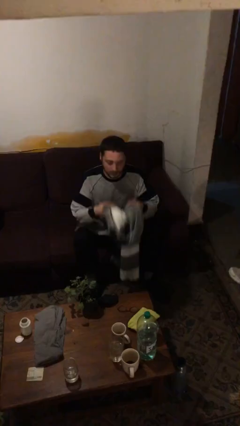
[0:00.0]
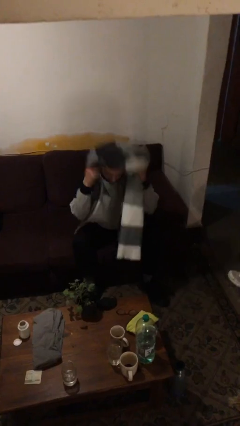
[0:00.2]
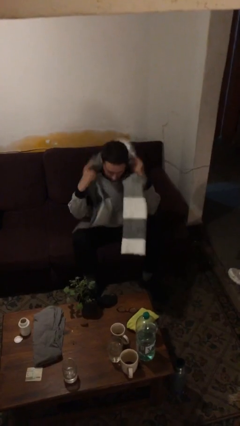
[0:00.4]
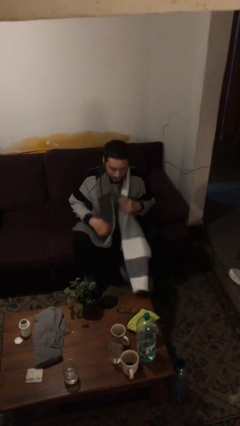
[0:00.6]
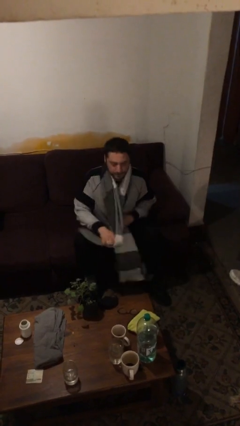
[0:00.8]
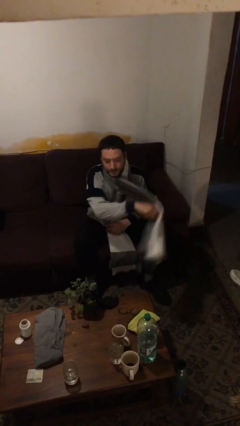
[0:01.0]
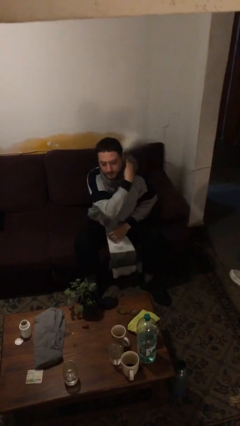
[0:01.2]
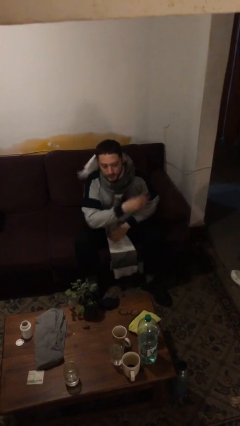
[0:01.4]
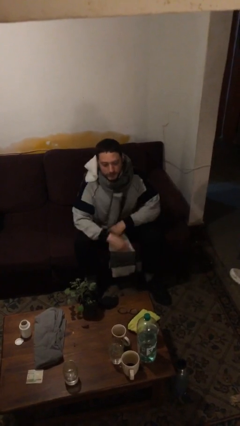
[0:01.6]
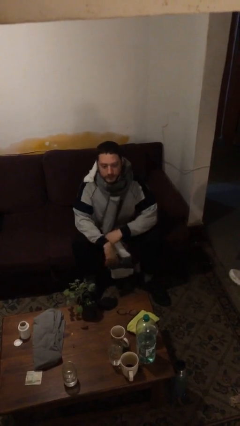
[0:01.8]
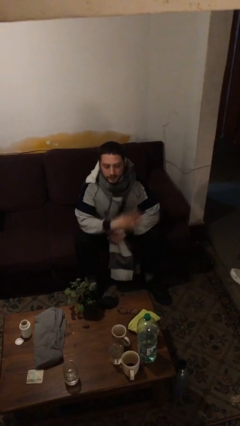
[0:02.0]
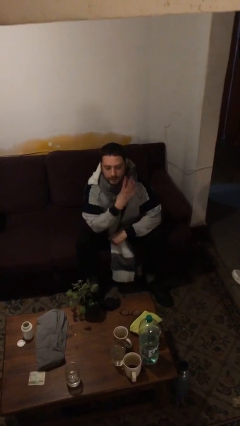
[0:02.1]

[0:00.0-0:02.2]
person puts on scarf

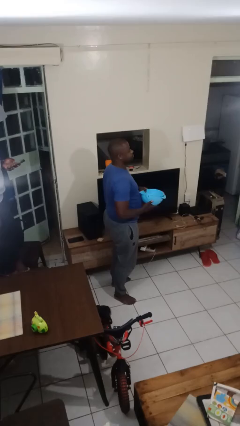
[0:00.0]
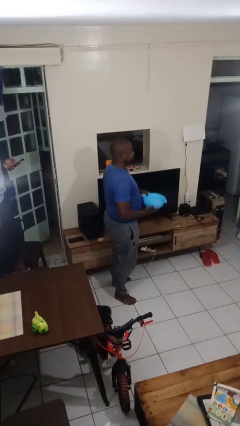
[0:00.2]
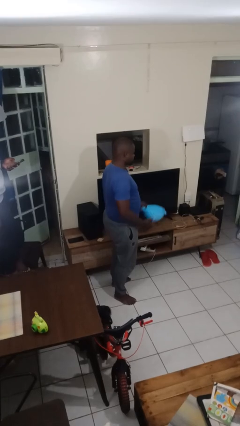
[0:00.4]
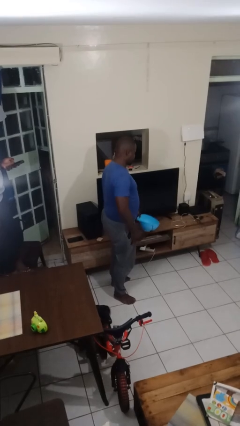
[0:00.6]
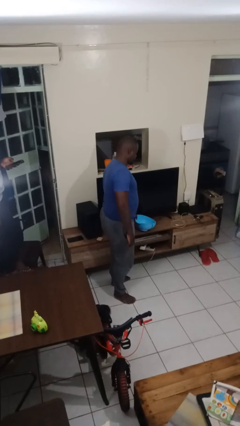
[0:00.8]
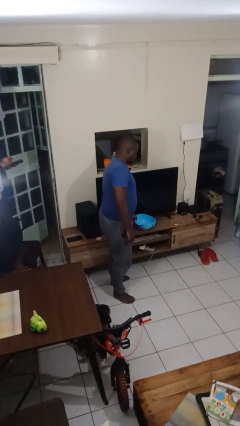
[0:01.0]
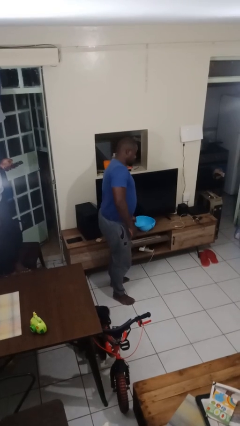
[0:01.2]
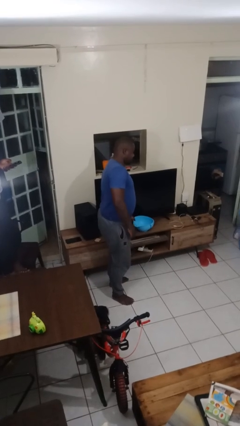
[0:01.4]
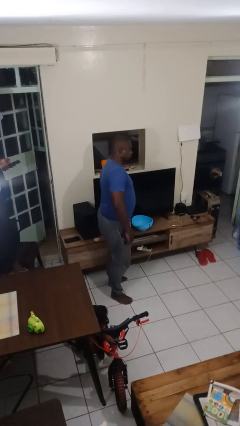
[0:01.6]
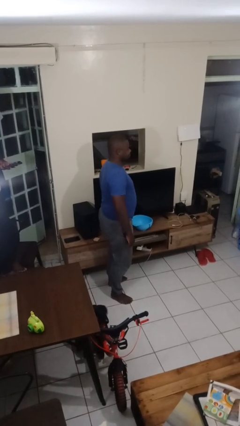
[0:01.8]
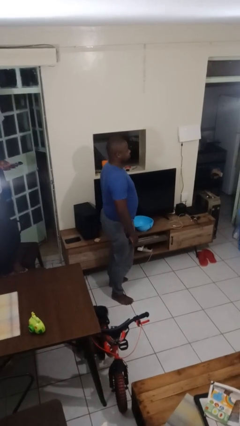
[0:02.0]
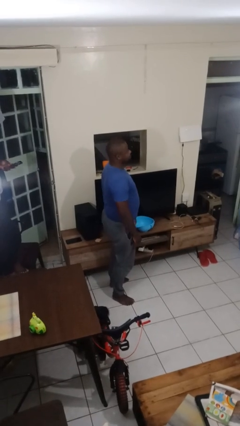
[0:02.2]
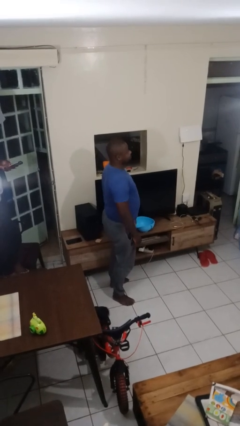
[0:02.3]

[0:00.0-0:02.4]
person puts down object on countertop

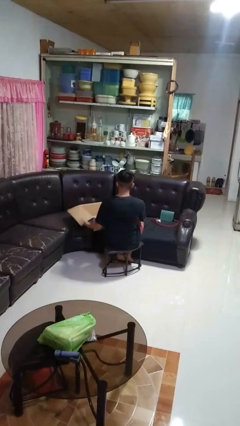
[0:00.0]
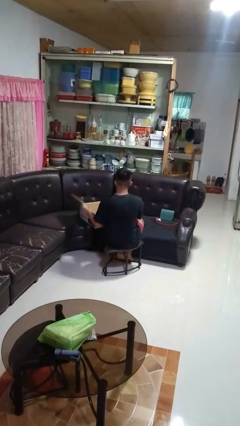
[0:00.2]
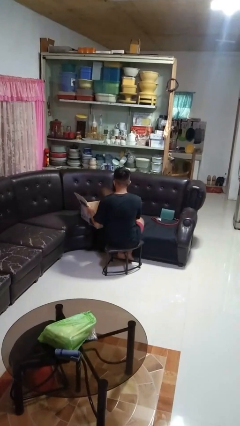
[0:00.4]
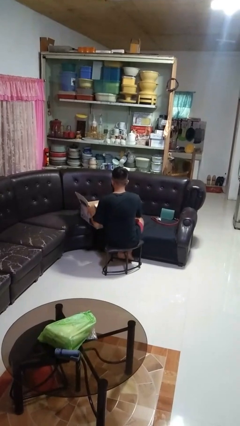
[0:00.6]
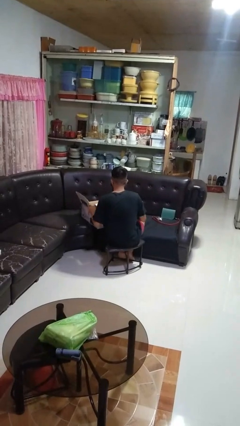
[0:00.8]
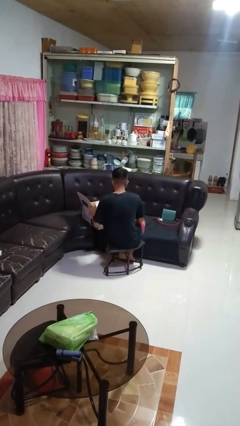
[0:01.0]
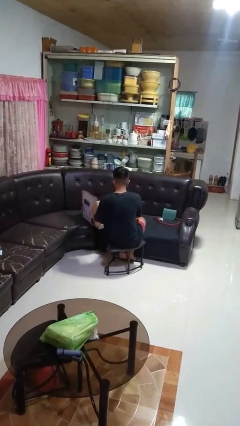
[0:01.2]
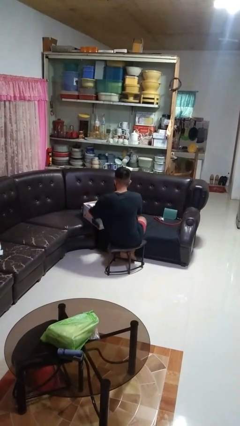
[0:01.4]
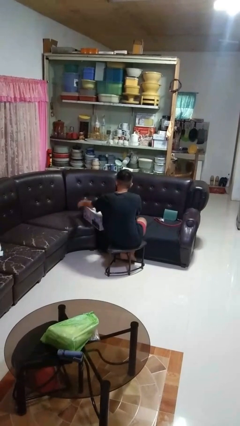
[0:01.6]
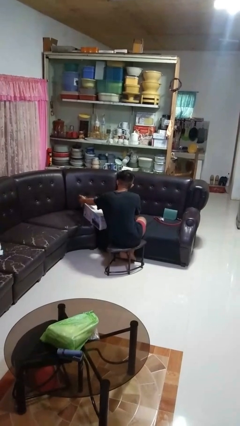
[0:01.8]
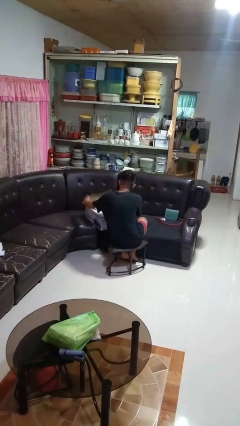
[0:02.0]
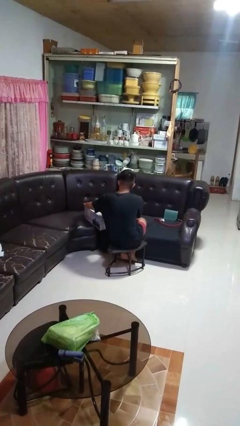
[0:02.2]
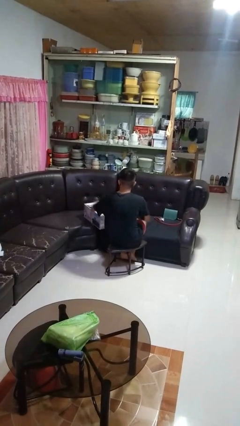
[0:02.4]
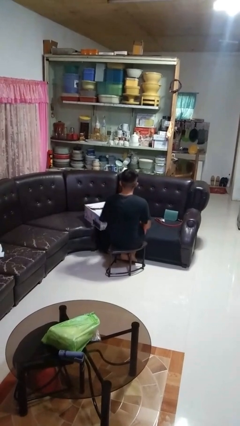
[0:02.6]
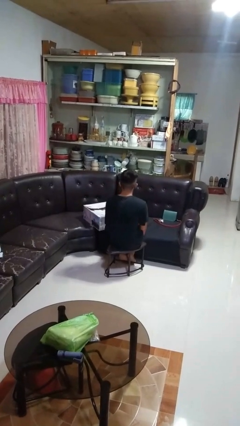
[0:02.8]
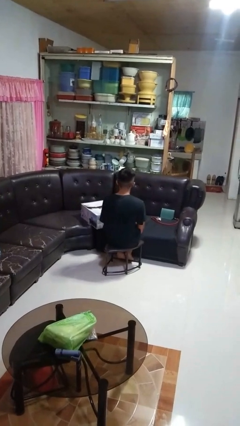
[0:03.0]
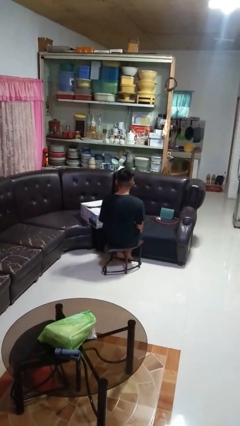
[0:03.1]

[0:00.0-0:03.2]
person closes box

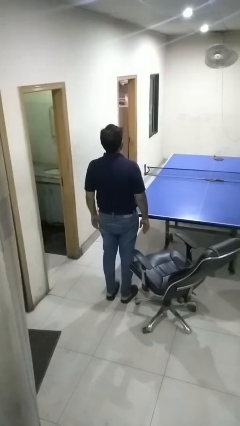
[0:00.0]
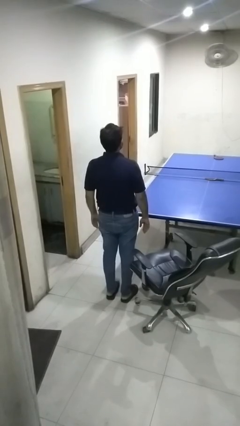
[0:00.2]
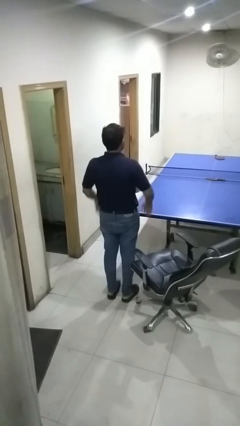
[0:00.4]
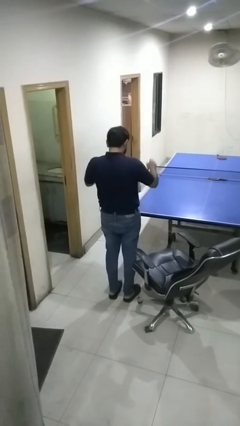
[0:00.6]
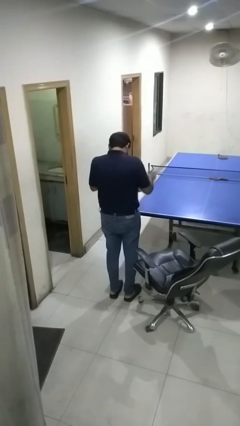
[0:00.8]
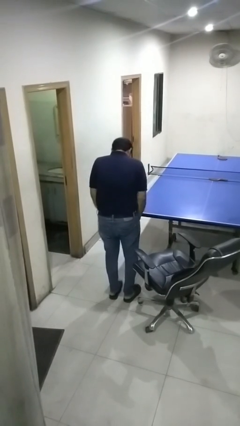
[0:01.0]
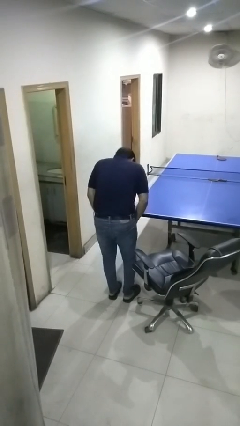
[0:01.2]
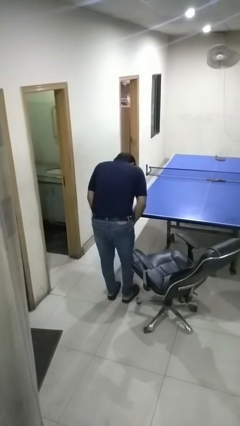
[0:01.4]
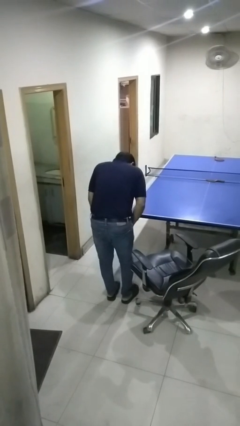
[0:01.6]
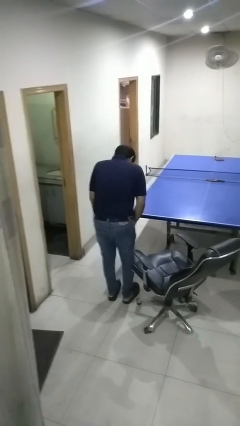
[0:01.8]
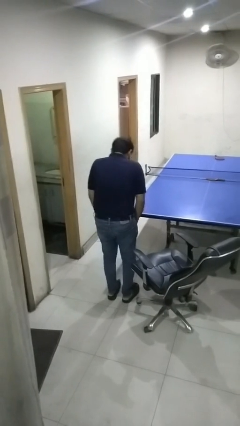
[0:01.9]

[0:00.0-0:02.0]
person slaps hands on thighs

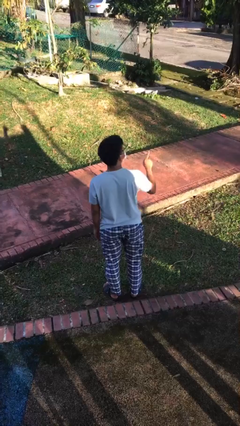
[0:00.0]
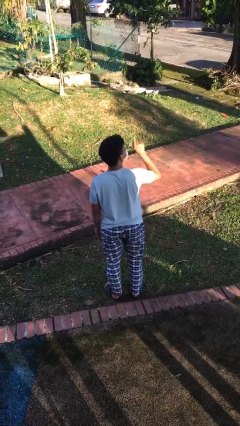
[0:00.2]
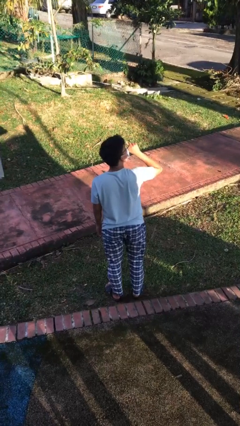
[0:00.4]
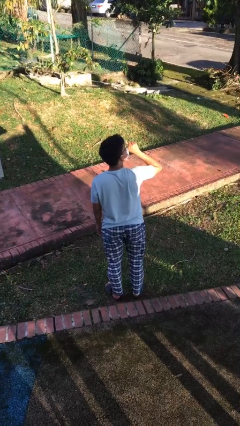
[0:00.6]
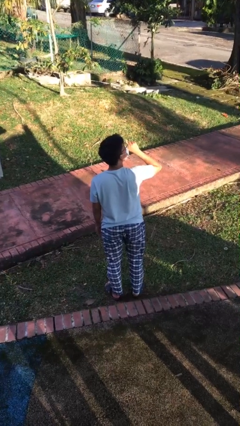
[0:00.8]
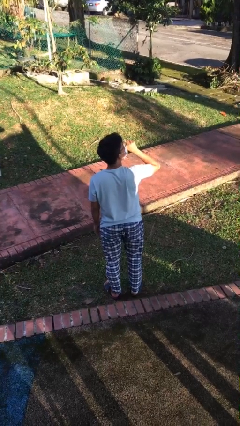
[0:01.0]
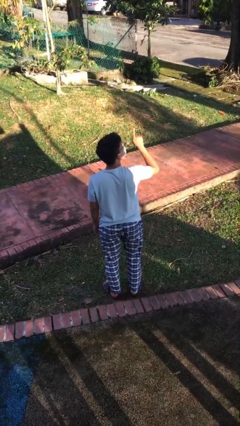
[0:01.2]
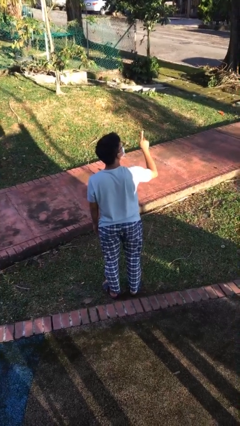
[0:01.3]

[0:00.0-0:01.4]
person gestures be quiet

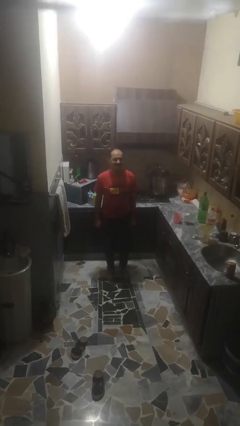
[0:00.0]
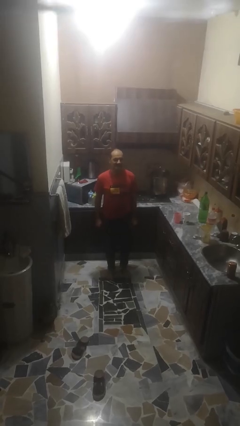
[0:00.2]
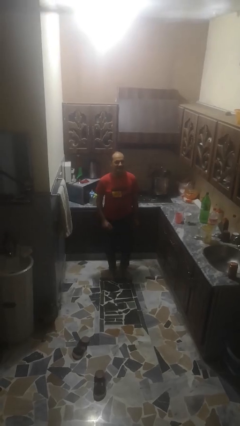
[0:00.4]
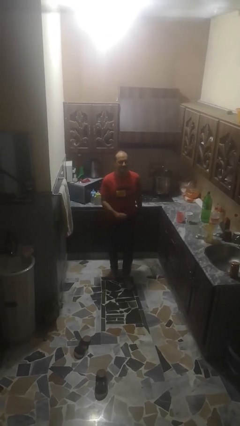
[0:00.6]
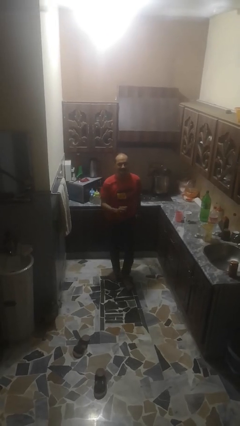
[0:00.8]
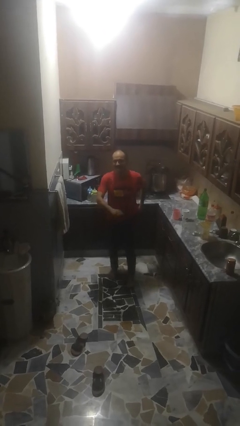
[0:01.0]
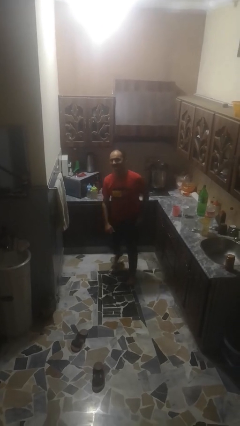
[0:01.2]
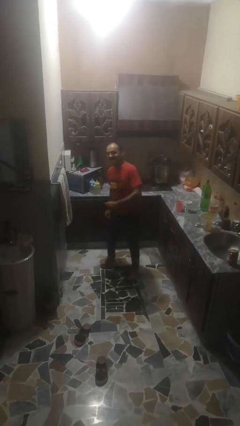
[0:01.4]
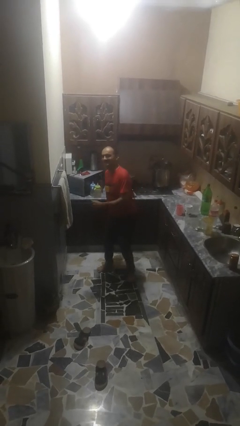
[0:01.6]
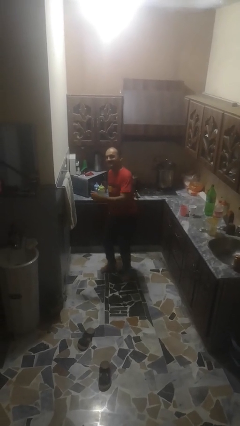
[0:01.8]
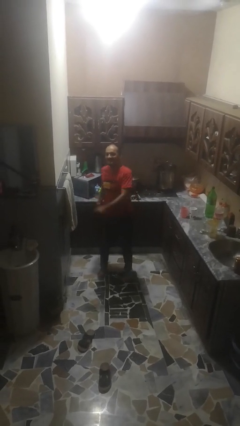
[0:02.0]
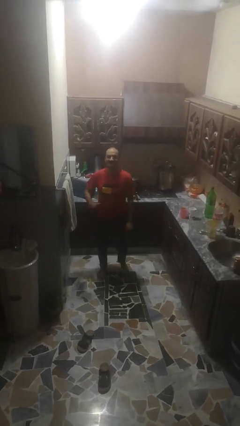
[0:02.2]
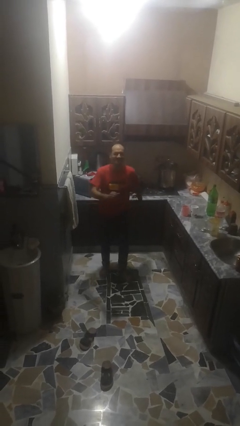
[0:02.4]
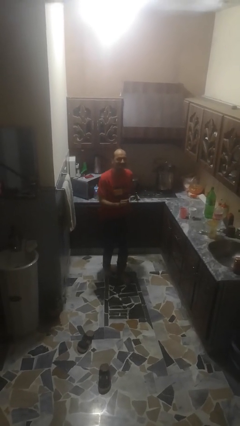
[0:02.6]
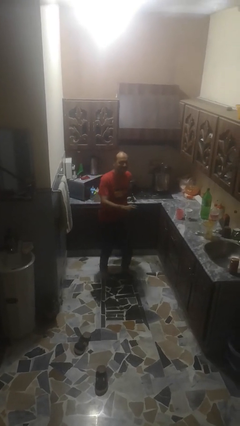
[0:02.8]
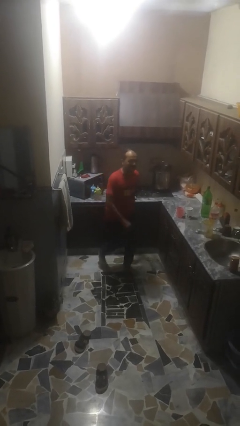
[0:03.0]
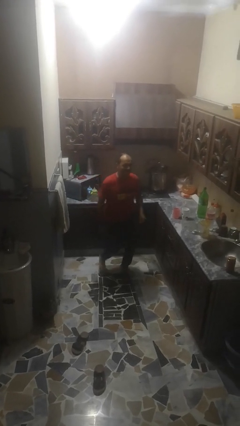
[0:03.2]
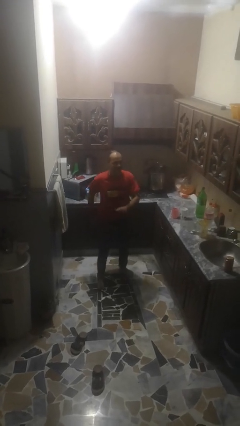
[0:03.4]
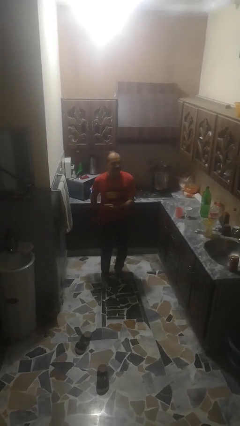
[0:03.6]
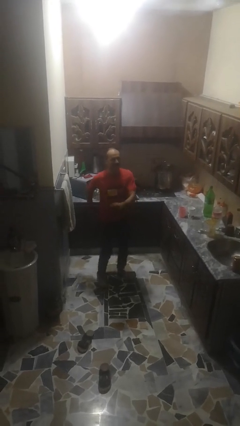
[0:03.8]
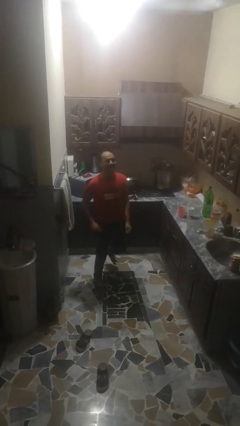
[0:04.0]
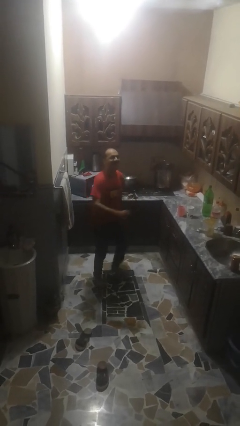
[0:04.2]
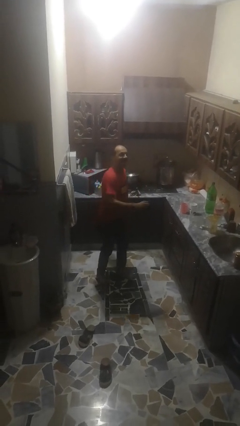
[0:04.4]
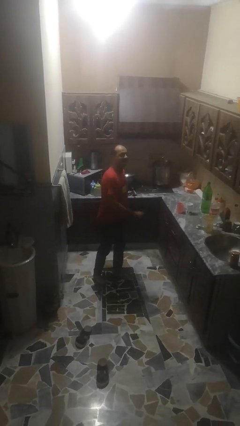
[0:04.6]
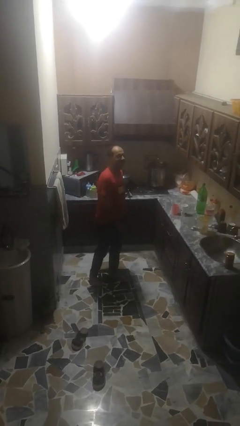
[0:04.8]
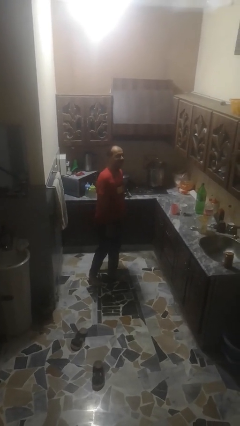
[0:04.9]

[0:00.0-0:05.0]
person dances in place

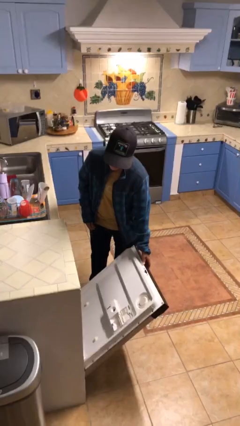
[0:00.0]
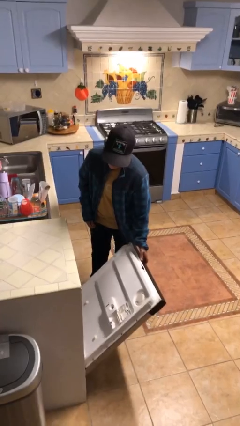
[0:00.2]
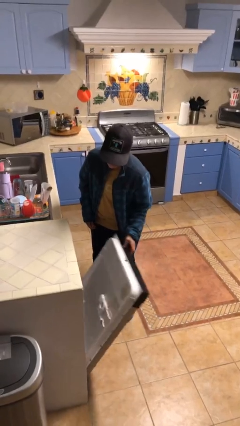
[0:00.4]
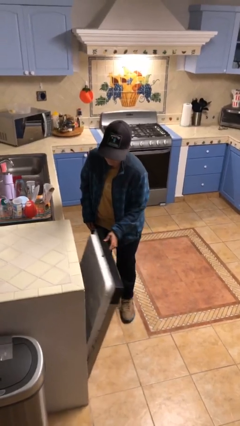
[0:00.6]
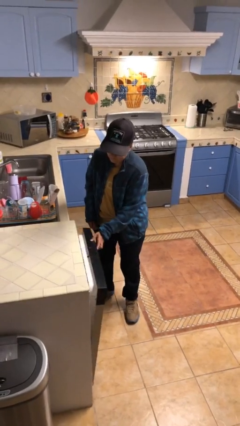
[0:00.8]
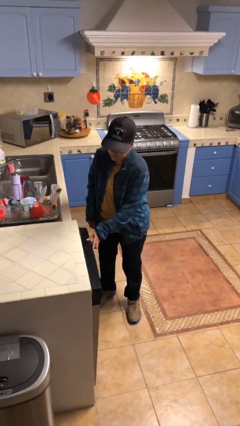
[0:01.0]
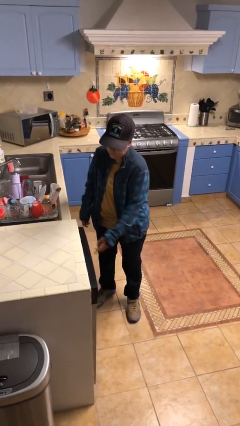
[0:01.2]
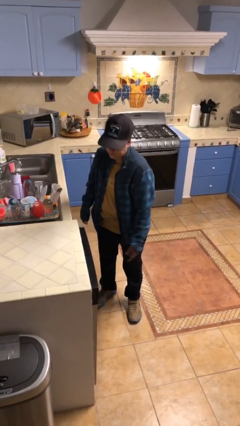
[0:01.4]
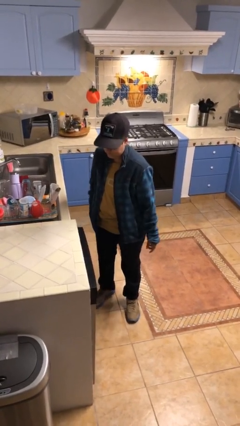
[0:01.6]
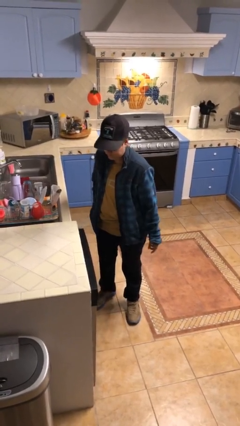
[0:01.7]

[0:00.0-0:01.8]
person closes dishwasher
